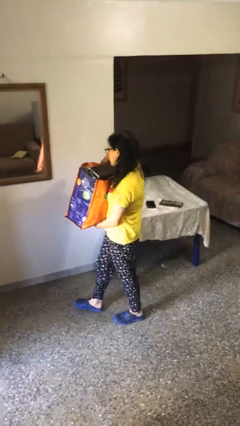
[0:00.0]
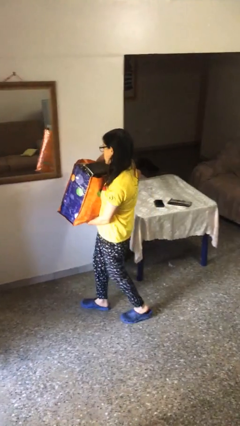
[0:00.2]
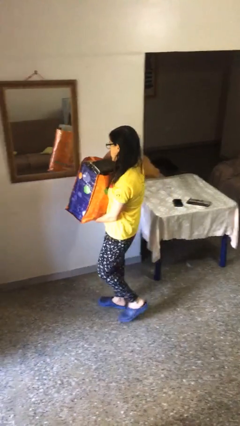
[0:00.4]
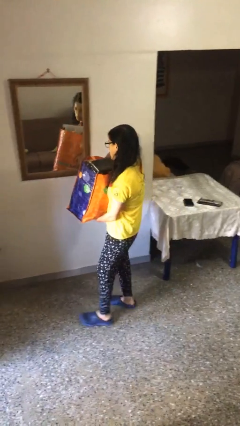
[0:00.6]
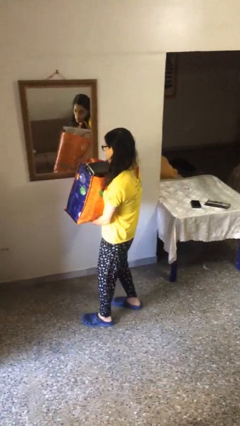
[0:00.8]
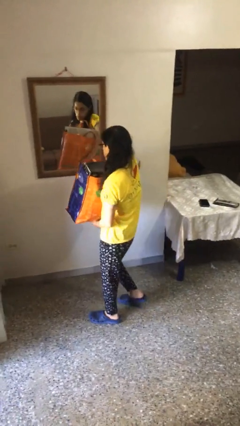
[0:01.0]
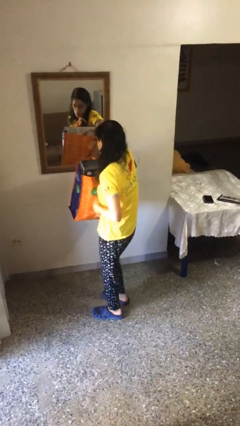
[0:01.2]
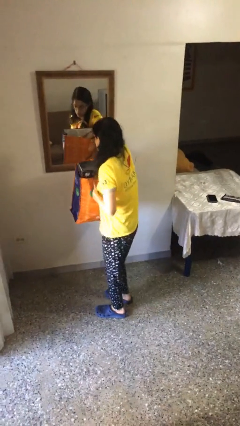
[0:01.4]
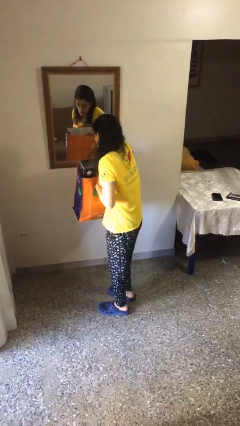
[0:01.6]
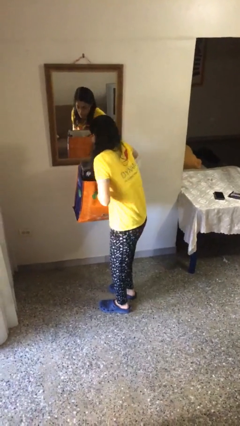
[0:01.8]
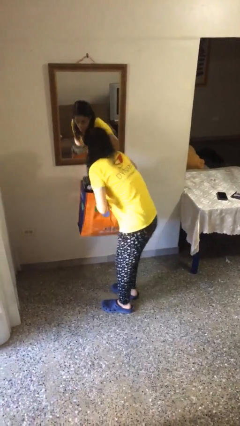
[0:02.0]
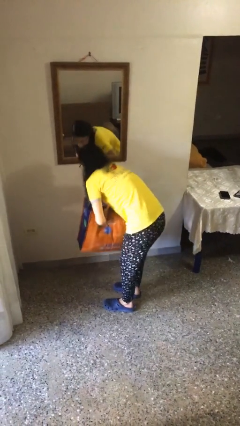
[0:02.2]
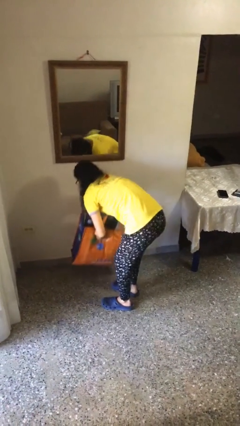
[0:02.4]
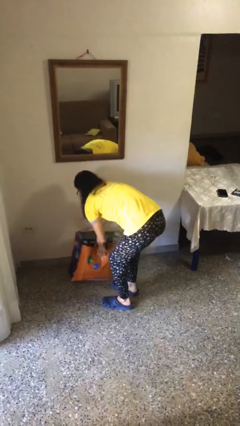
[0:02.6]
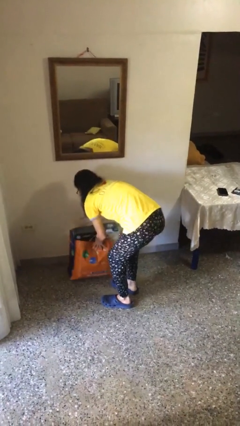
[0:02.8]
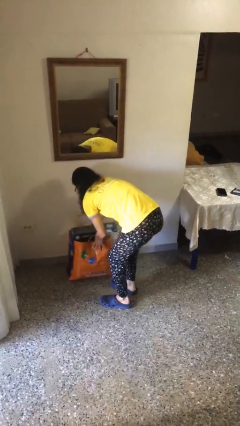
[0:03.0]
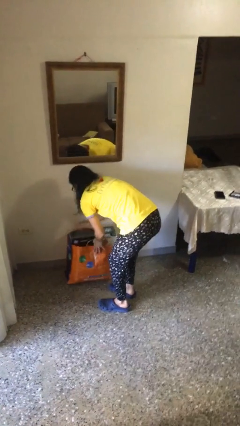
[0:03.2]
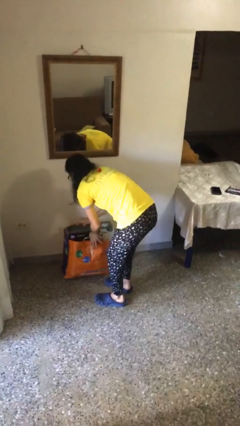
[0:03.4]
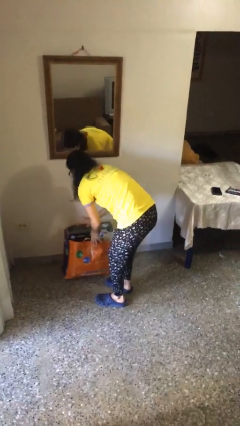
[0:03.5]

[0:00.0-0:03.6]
person puts down object on floor

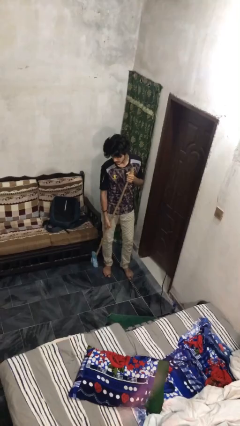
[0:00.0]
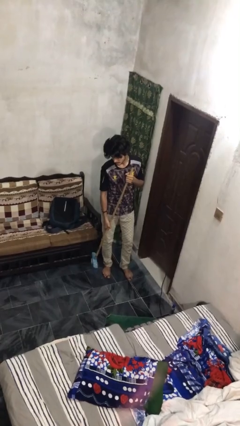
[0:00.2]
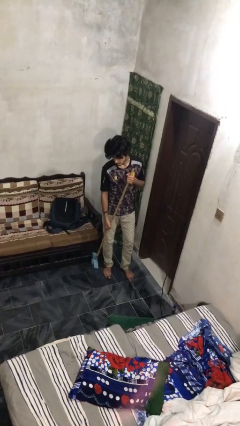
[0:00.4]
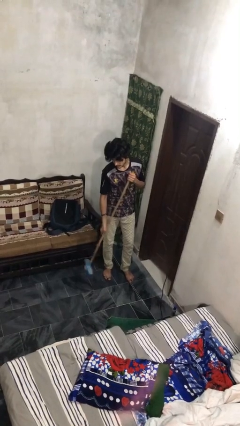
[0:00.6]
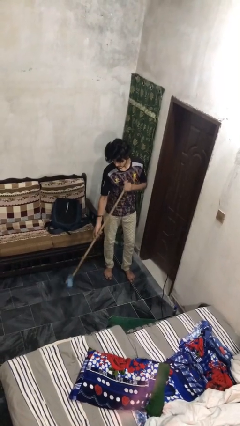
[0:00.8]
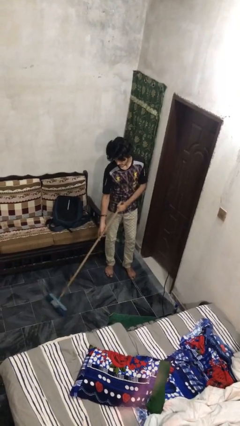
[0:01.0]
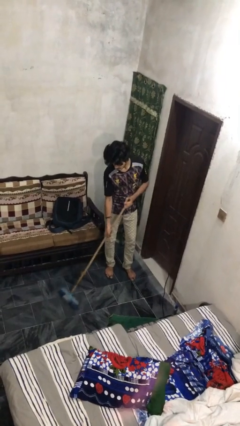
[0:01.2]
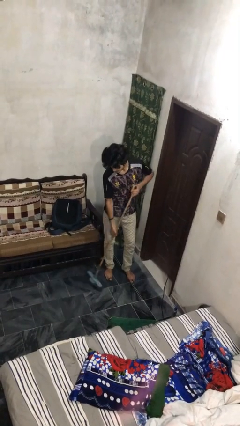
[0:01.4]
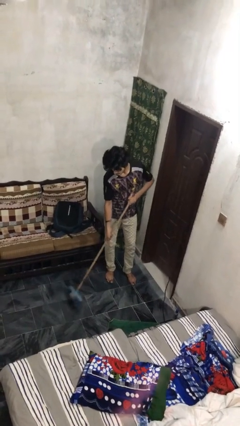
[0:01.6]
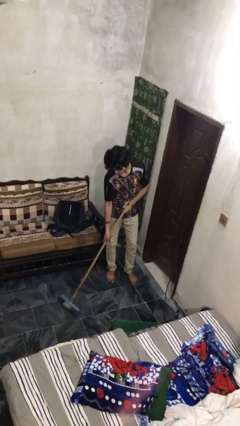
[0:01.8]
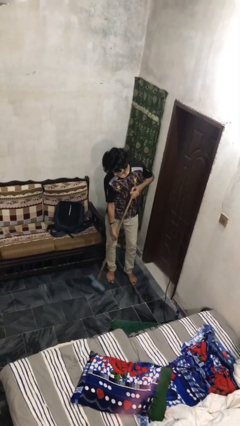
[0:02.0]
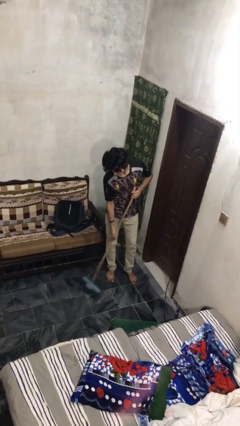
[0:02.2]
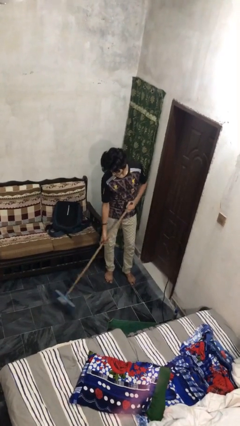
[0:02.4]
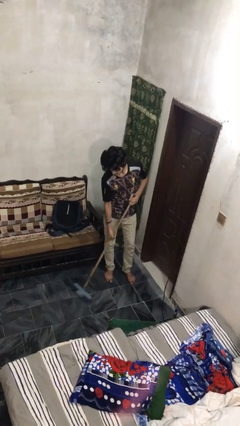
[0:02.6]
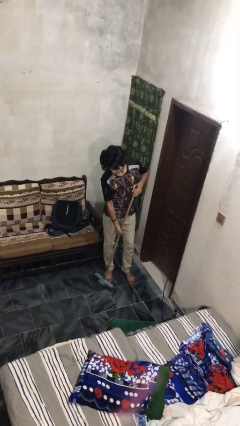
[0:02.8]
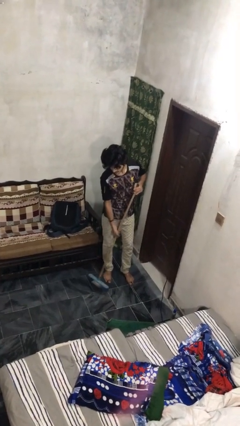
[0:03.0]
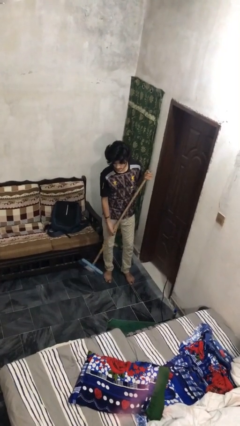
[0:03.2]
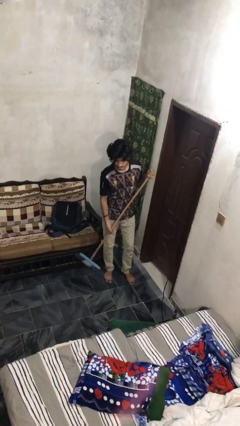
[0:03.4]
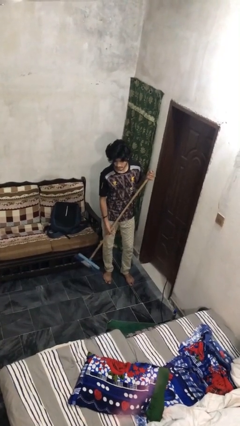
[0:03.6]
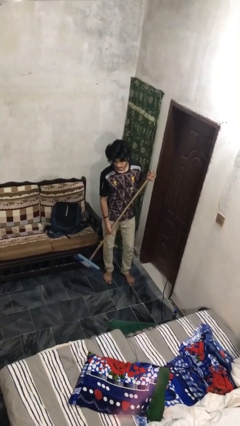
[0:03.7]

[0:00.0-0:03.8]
person sweeps floor

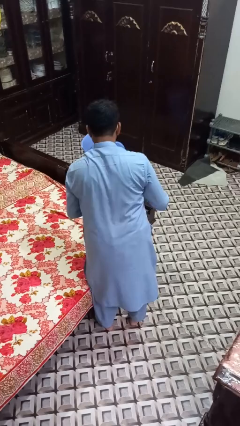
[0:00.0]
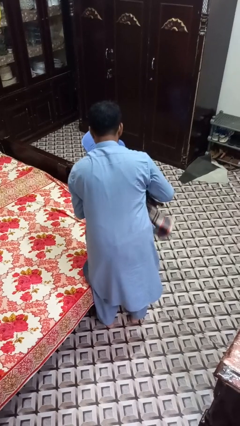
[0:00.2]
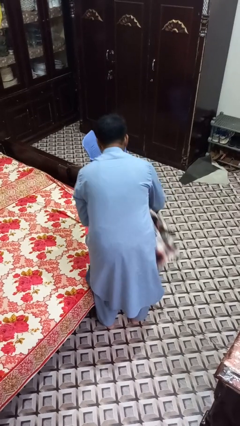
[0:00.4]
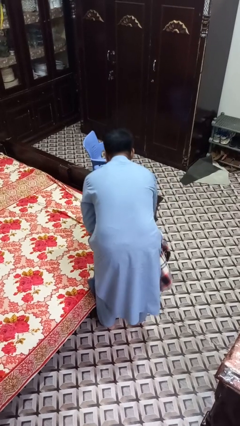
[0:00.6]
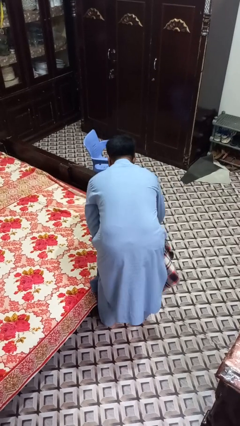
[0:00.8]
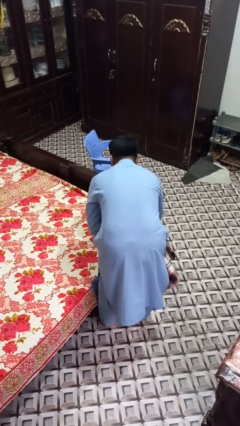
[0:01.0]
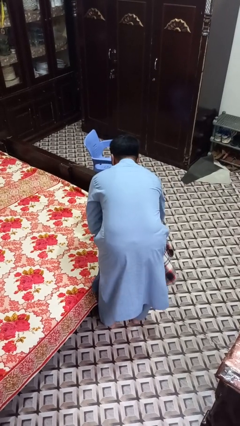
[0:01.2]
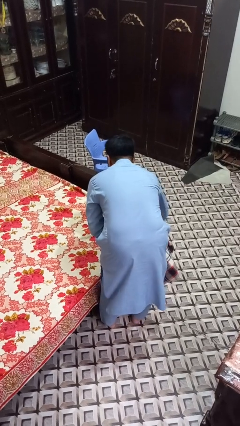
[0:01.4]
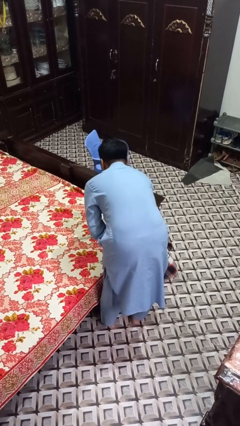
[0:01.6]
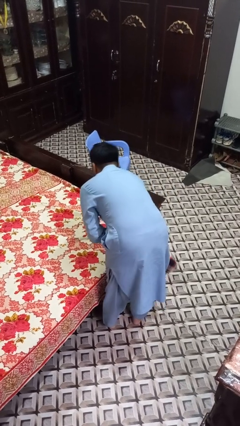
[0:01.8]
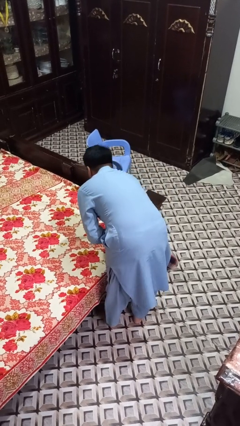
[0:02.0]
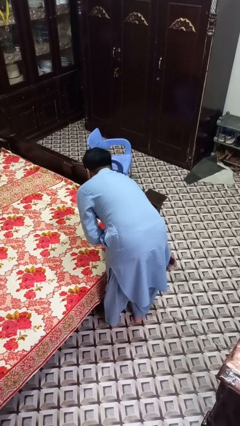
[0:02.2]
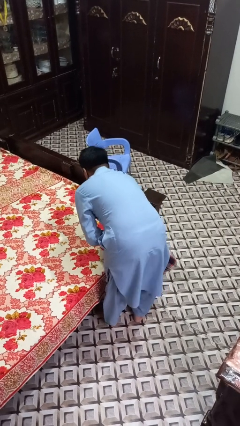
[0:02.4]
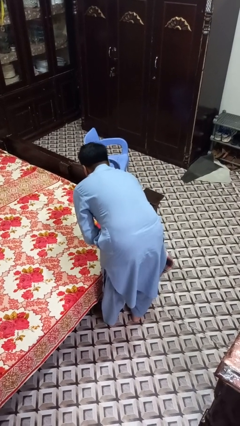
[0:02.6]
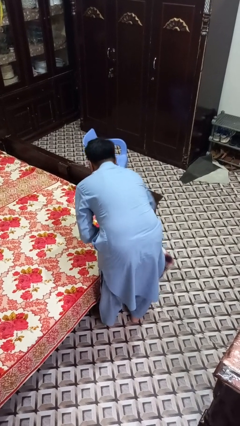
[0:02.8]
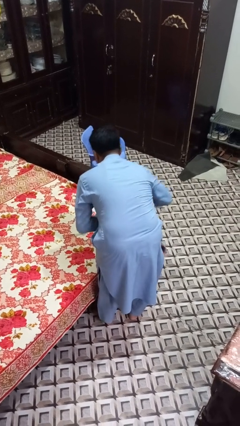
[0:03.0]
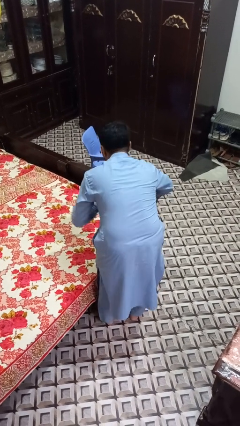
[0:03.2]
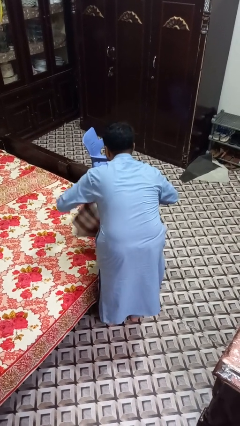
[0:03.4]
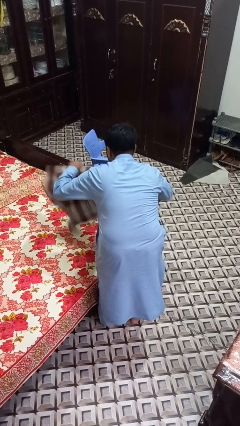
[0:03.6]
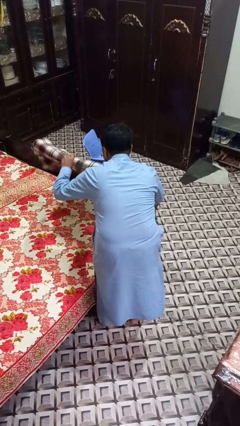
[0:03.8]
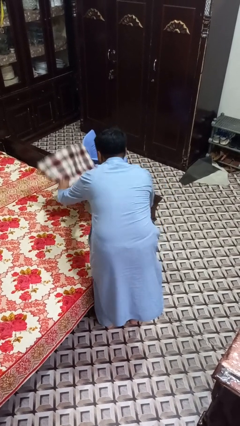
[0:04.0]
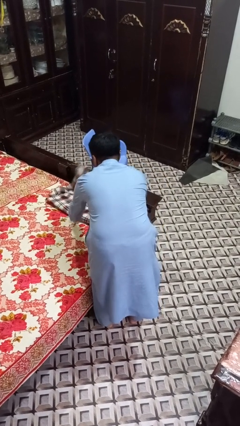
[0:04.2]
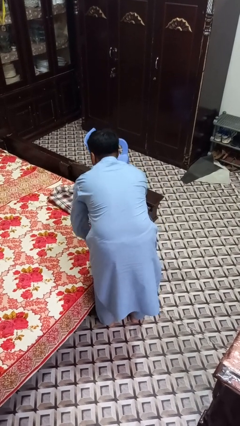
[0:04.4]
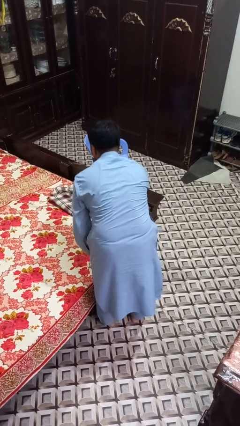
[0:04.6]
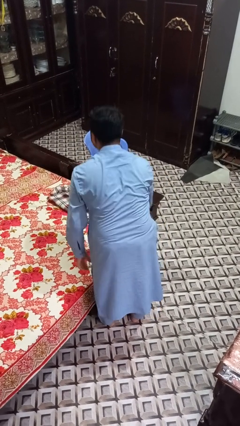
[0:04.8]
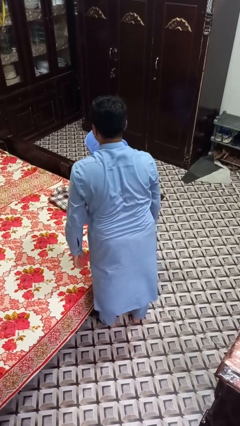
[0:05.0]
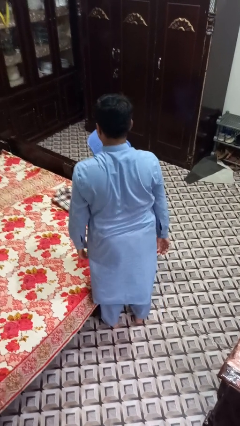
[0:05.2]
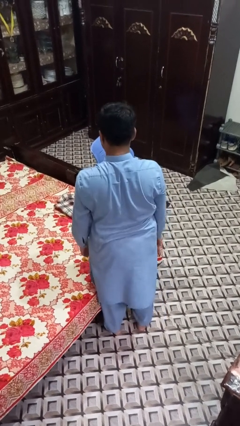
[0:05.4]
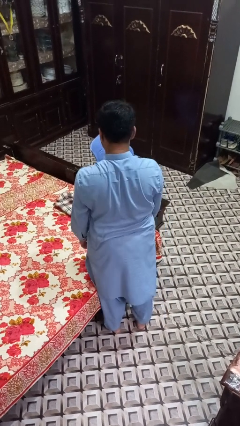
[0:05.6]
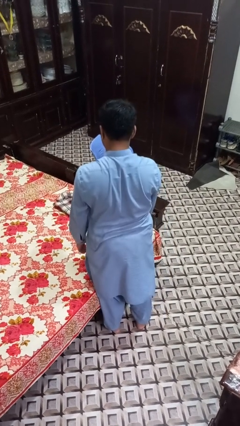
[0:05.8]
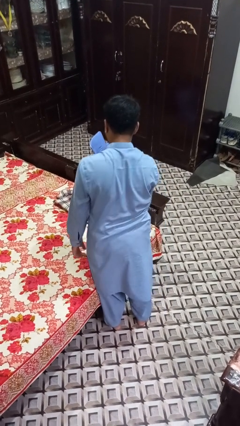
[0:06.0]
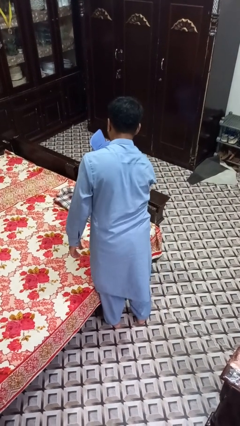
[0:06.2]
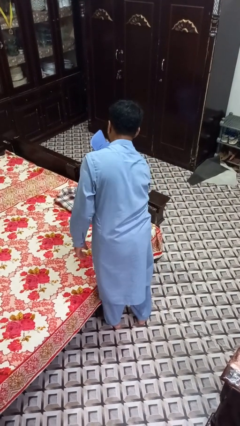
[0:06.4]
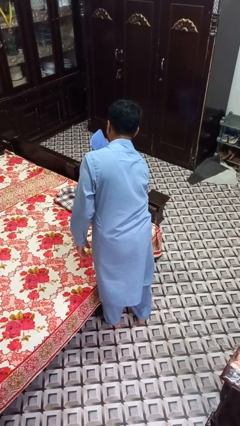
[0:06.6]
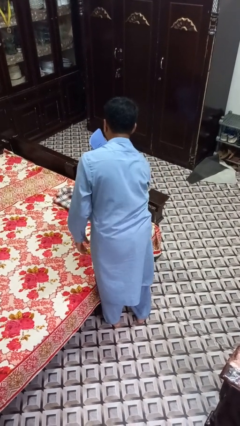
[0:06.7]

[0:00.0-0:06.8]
person makes bed

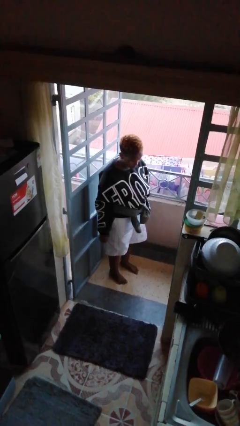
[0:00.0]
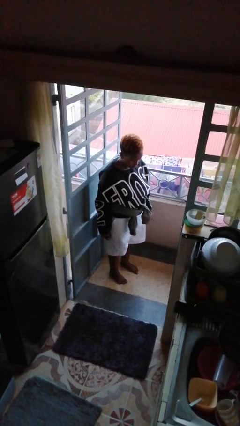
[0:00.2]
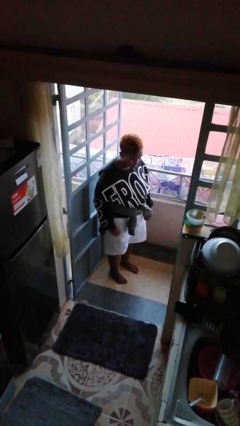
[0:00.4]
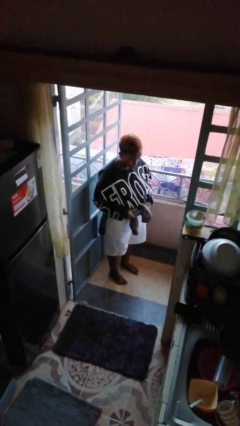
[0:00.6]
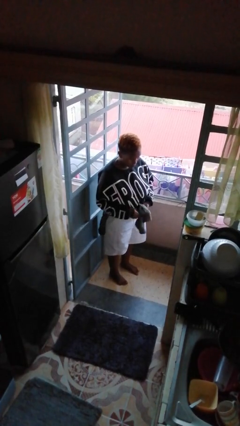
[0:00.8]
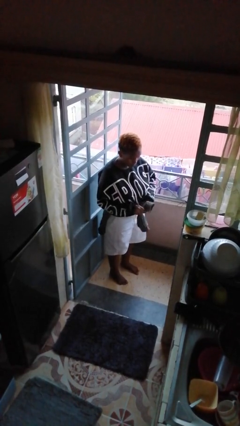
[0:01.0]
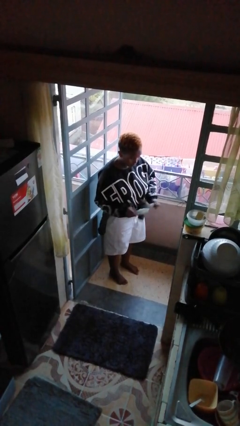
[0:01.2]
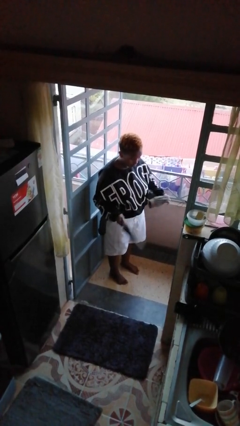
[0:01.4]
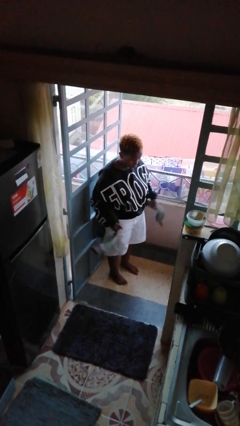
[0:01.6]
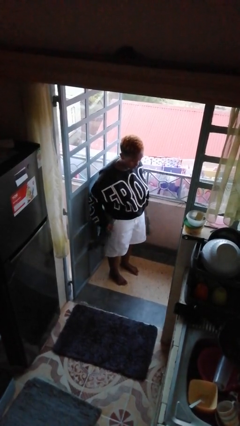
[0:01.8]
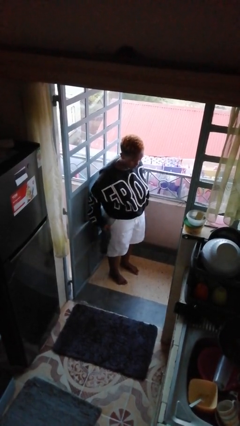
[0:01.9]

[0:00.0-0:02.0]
person unties jacket around waist

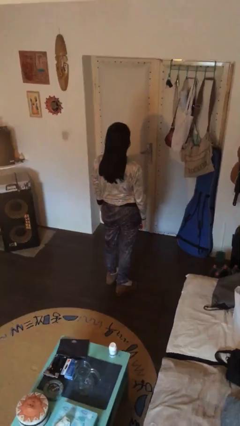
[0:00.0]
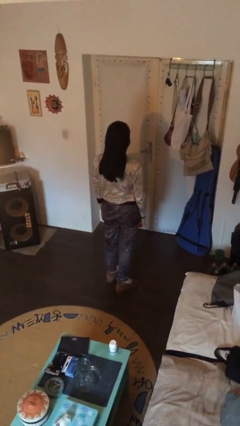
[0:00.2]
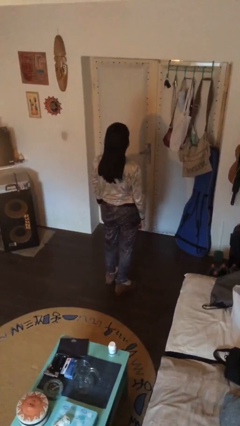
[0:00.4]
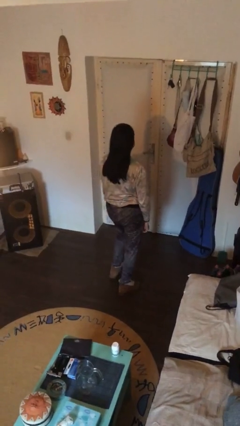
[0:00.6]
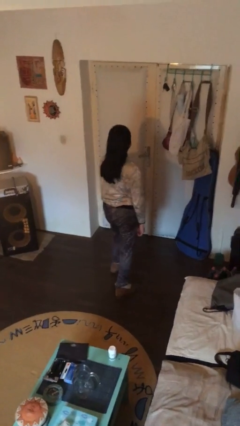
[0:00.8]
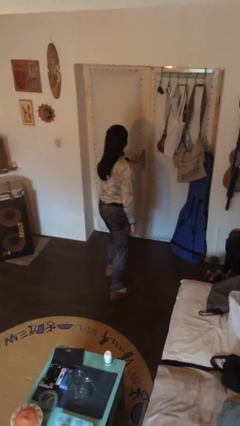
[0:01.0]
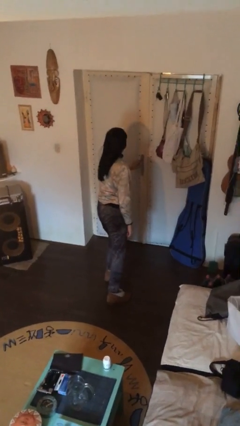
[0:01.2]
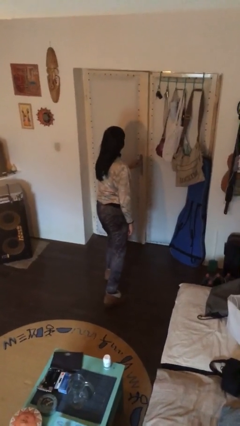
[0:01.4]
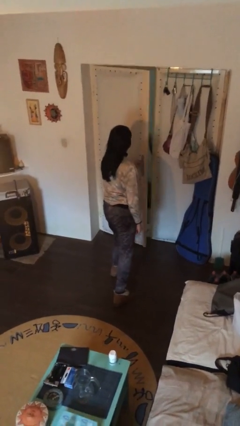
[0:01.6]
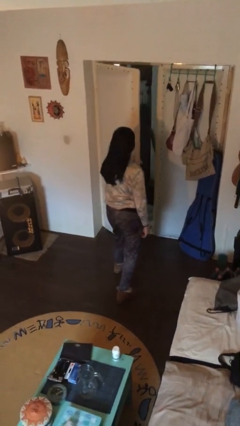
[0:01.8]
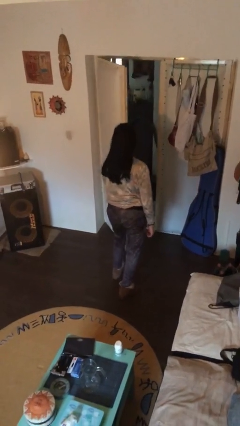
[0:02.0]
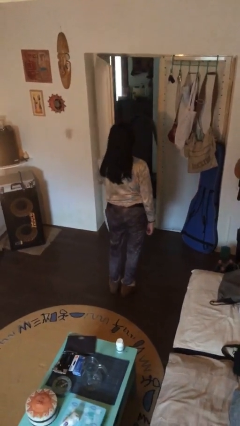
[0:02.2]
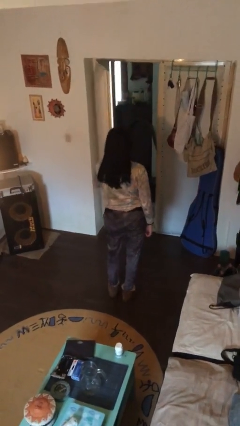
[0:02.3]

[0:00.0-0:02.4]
person opens facility door
